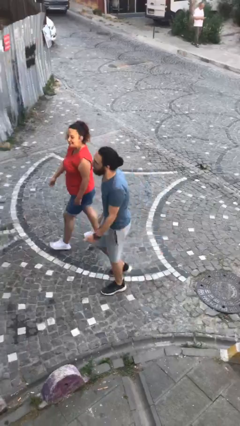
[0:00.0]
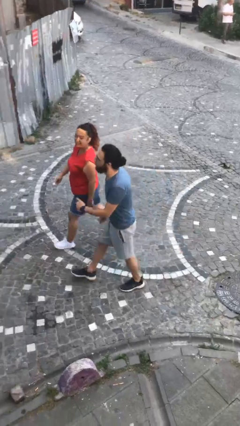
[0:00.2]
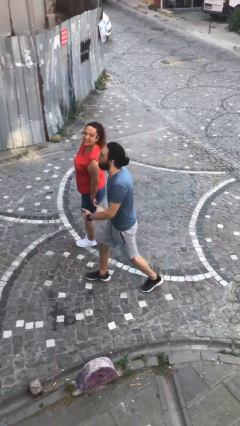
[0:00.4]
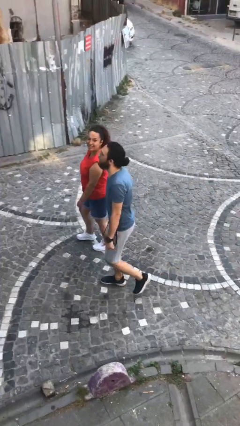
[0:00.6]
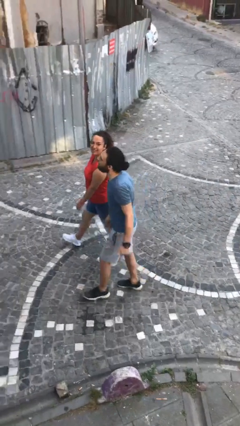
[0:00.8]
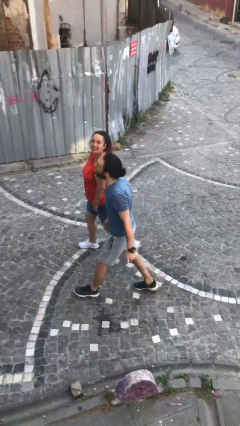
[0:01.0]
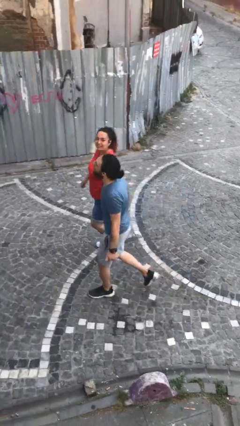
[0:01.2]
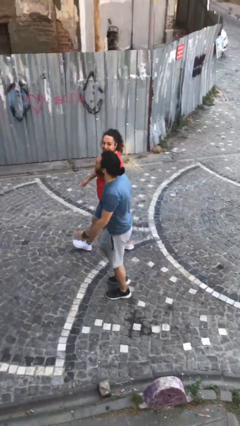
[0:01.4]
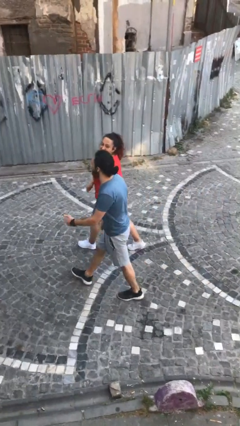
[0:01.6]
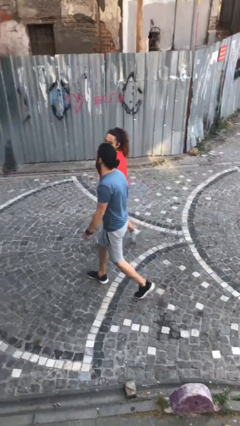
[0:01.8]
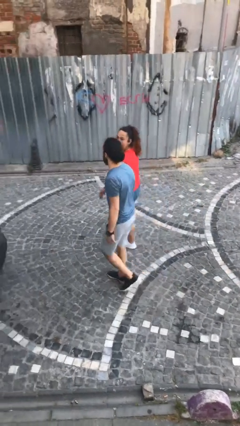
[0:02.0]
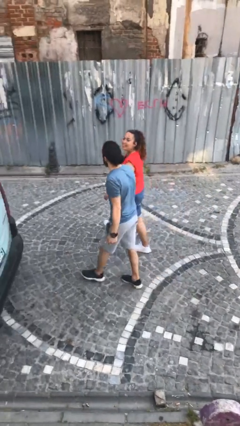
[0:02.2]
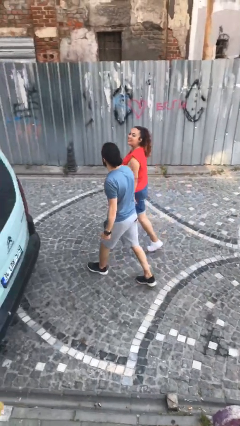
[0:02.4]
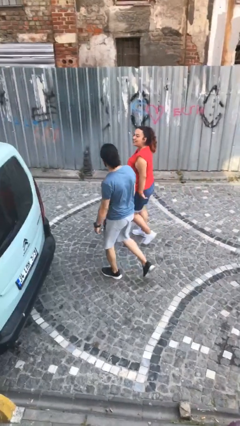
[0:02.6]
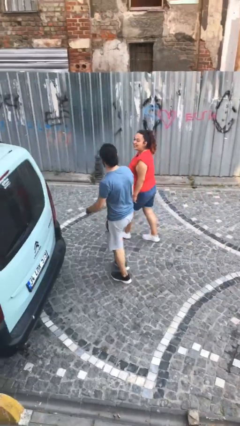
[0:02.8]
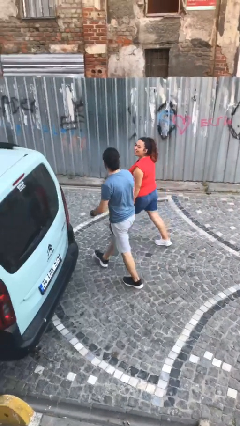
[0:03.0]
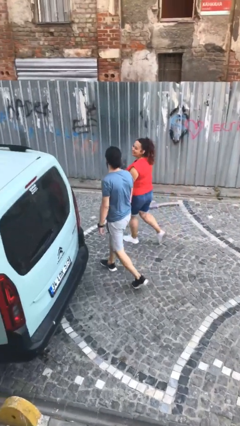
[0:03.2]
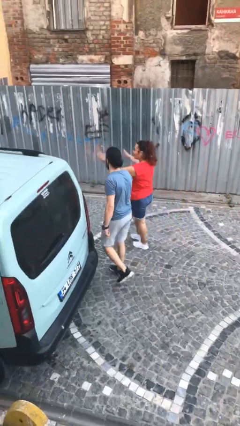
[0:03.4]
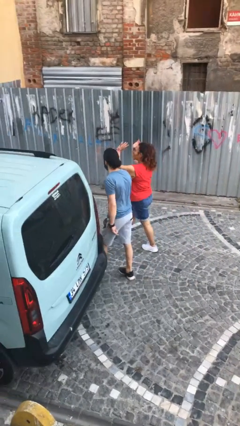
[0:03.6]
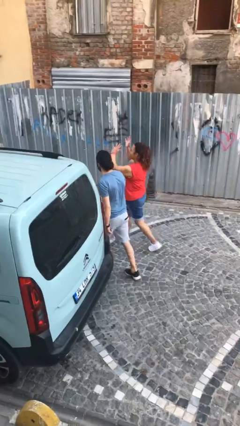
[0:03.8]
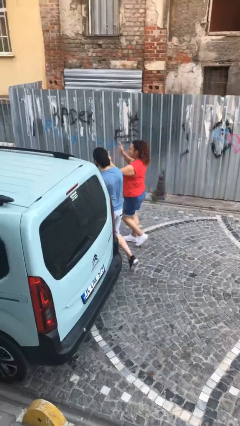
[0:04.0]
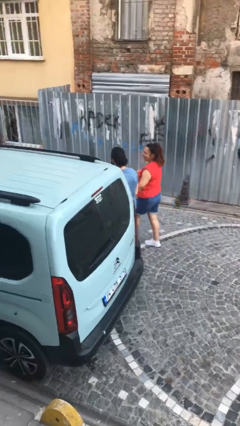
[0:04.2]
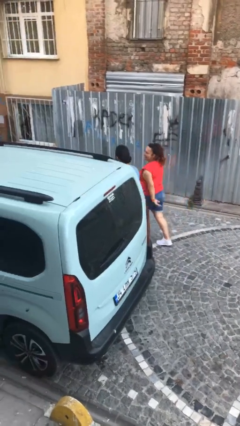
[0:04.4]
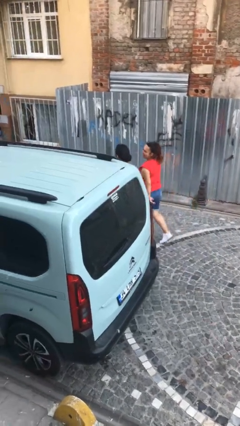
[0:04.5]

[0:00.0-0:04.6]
person talks to person

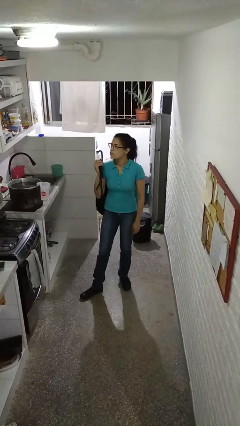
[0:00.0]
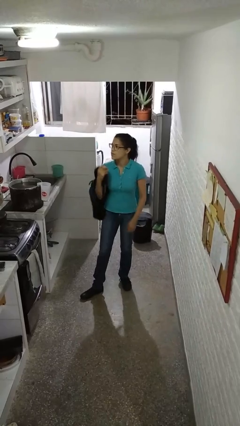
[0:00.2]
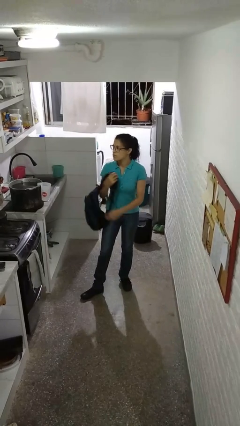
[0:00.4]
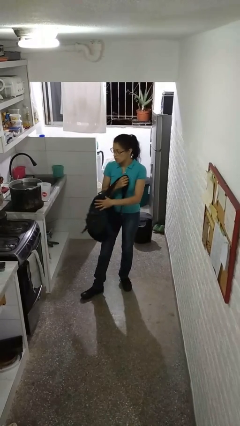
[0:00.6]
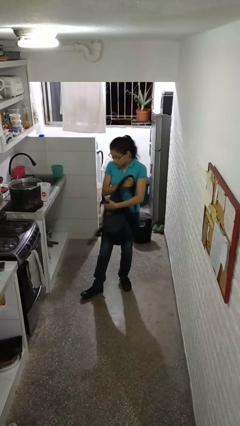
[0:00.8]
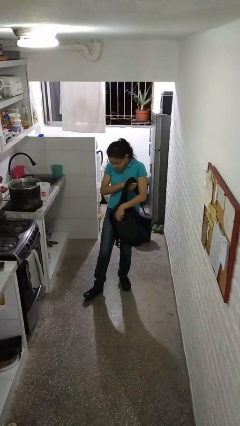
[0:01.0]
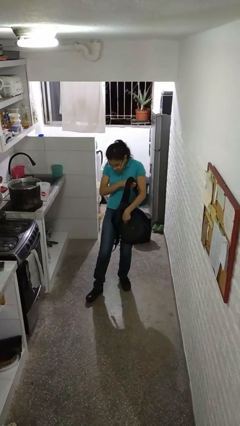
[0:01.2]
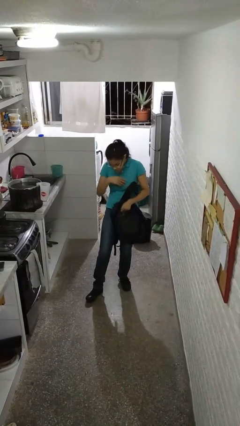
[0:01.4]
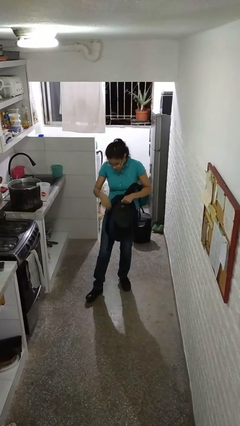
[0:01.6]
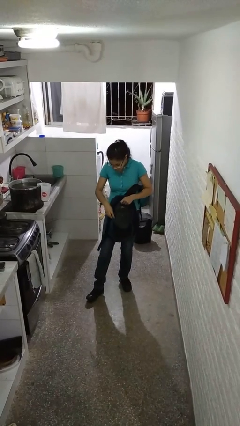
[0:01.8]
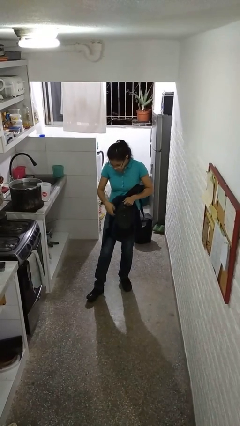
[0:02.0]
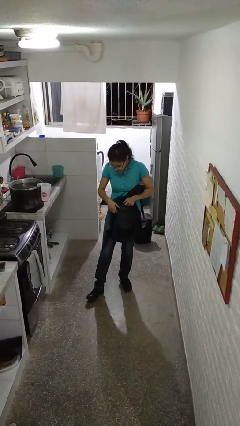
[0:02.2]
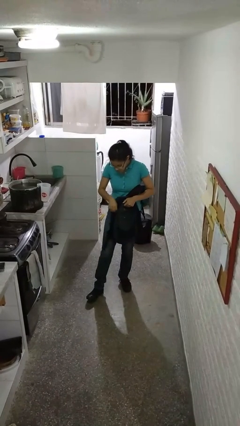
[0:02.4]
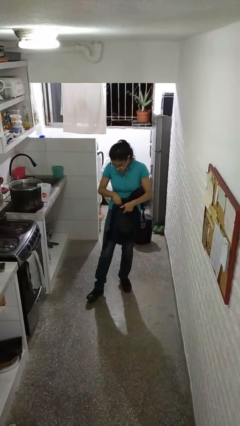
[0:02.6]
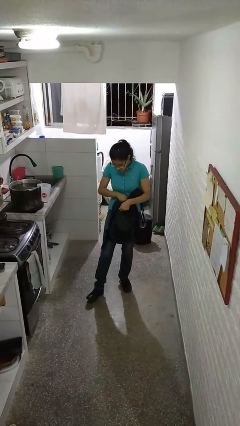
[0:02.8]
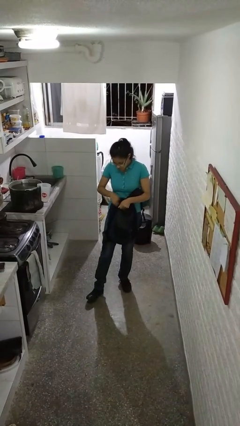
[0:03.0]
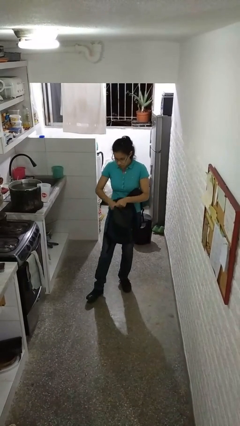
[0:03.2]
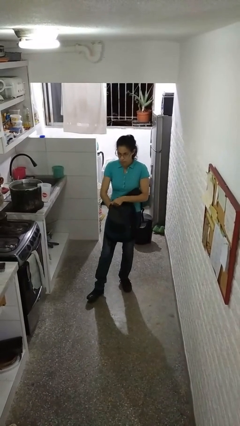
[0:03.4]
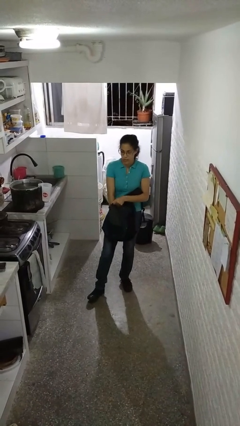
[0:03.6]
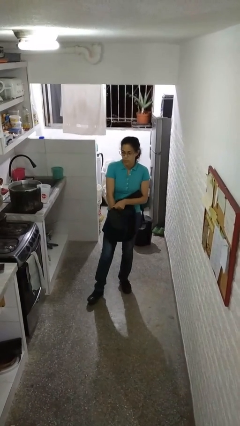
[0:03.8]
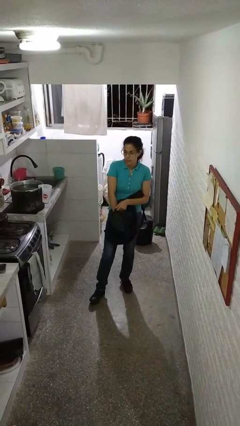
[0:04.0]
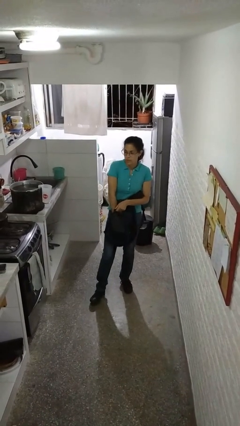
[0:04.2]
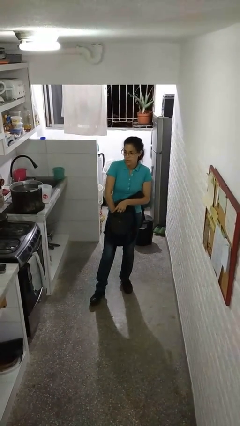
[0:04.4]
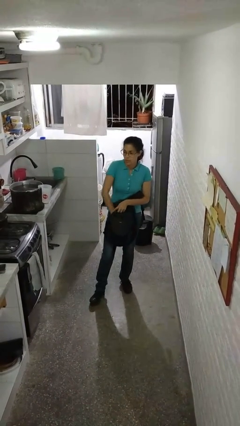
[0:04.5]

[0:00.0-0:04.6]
person searches in backpack

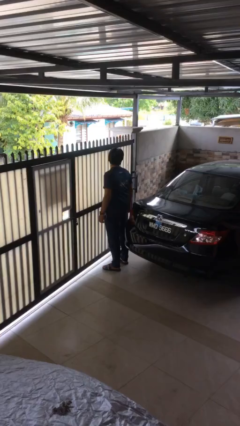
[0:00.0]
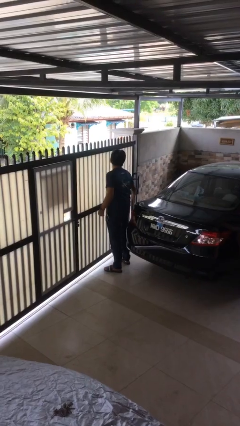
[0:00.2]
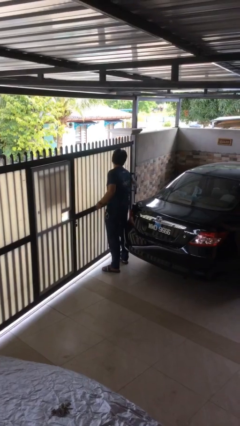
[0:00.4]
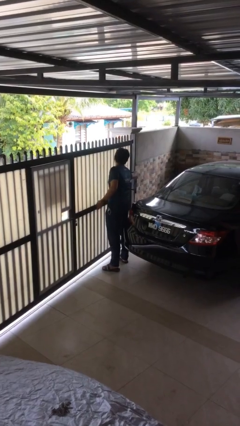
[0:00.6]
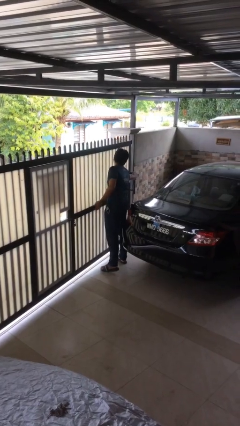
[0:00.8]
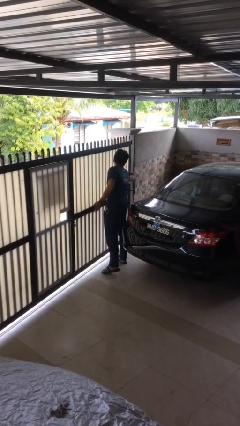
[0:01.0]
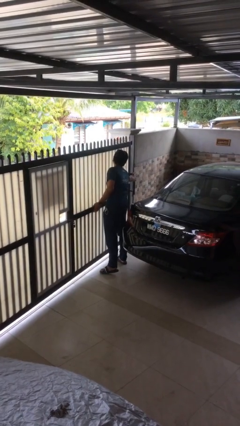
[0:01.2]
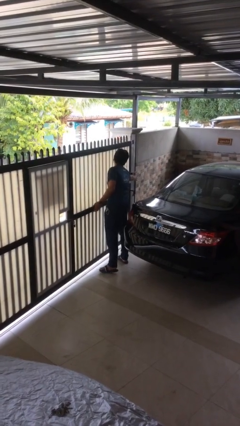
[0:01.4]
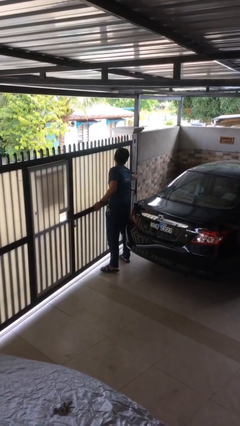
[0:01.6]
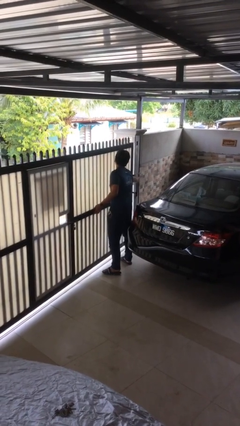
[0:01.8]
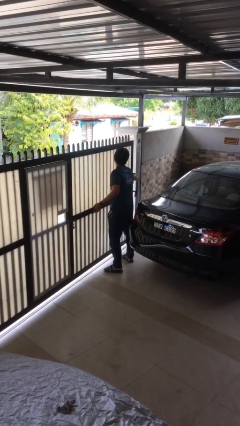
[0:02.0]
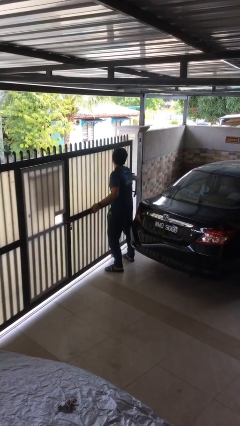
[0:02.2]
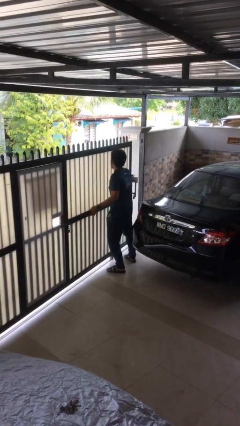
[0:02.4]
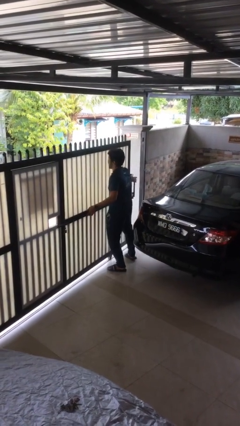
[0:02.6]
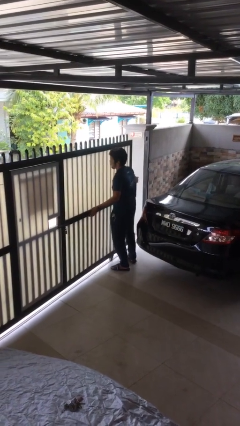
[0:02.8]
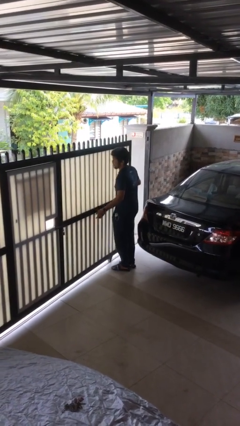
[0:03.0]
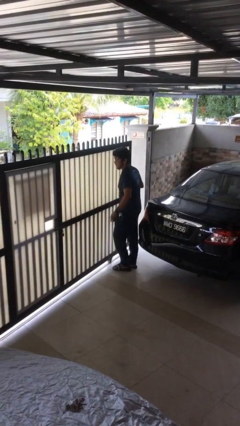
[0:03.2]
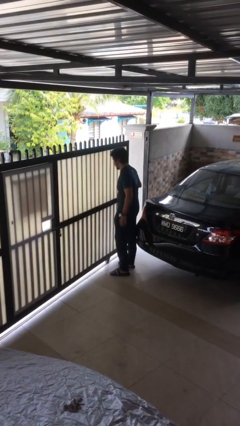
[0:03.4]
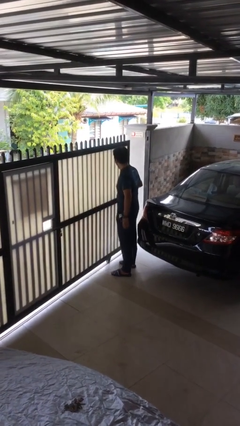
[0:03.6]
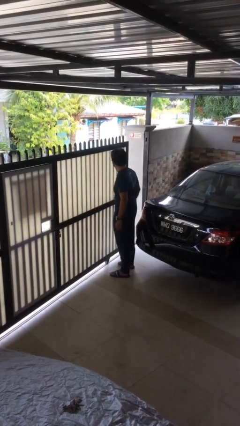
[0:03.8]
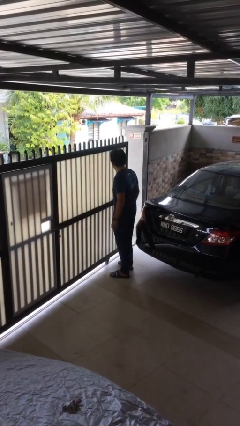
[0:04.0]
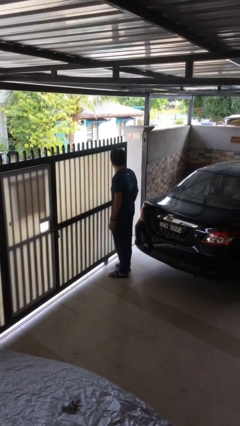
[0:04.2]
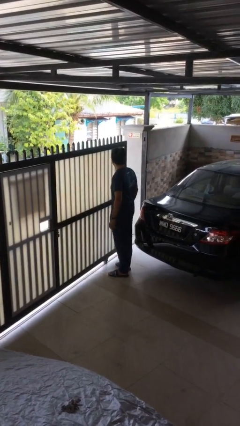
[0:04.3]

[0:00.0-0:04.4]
person opens sliding door

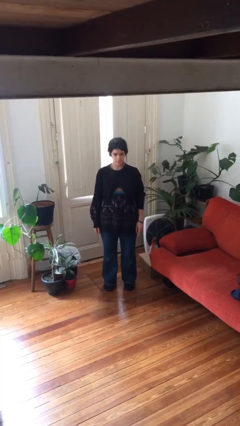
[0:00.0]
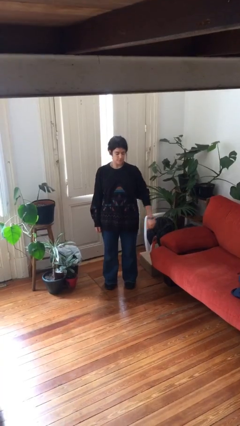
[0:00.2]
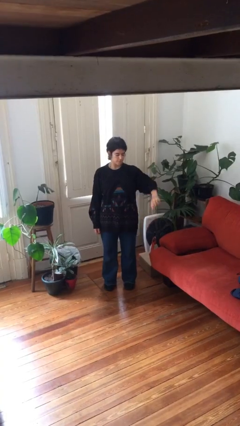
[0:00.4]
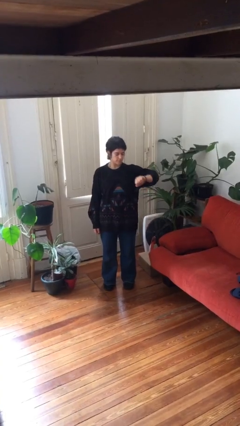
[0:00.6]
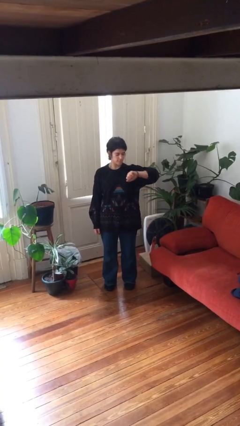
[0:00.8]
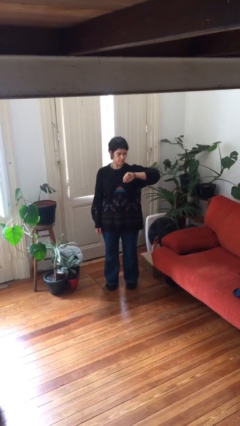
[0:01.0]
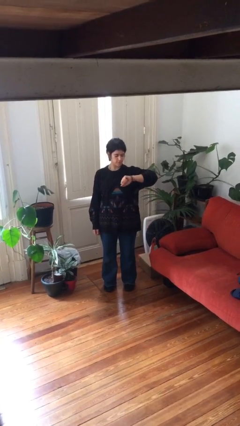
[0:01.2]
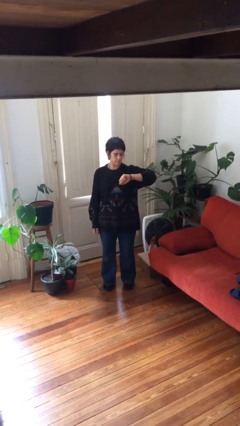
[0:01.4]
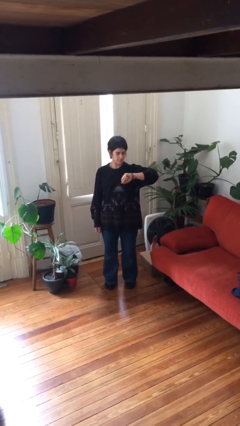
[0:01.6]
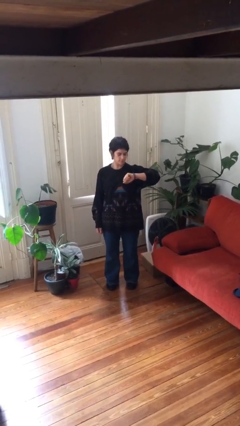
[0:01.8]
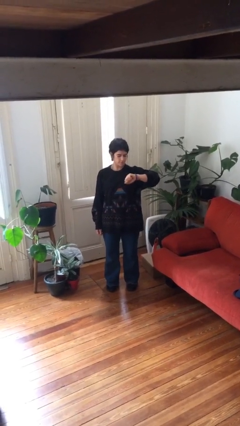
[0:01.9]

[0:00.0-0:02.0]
person looks at wristwatch

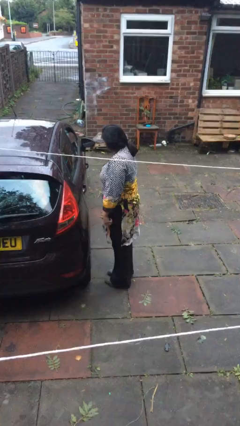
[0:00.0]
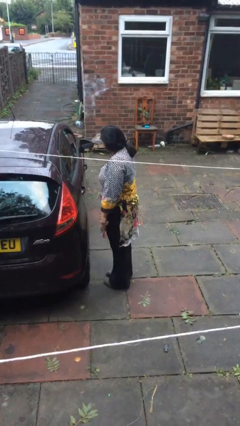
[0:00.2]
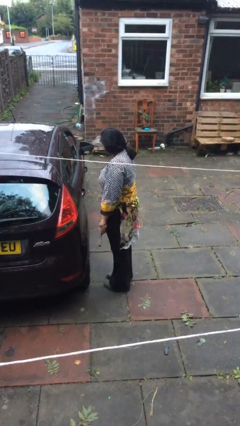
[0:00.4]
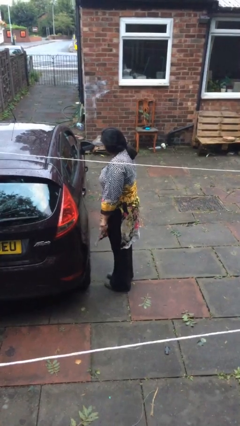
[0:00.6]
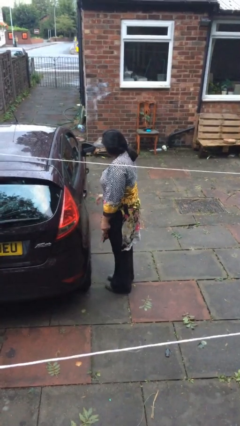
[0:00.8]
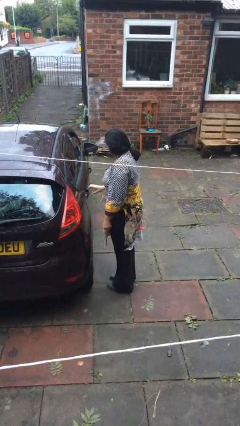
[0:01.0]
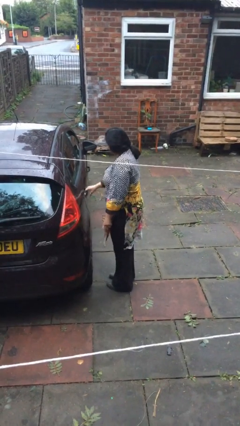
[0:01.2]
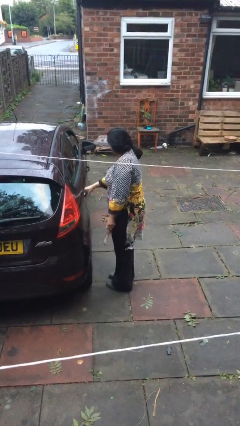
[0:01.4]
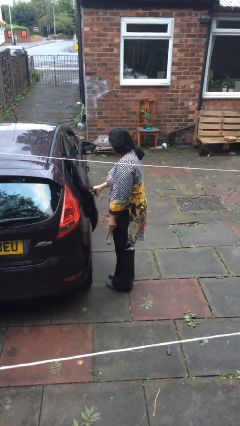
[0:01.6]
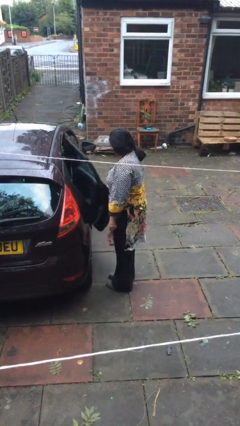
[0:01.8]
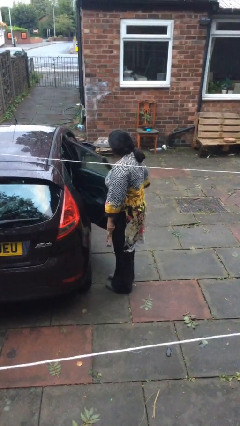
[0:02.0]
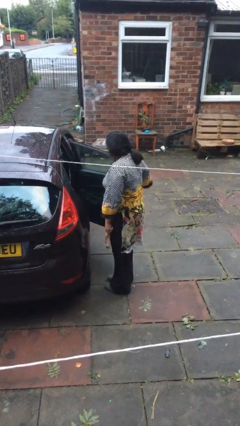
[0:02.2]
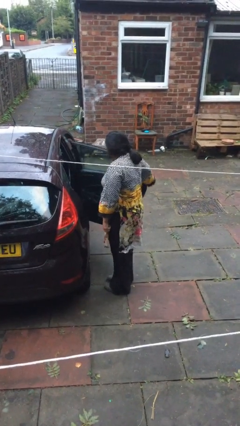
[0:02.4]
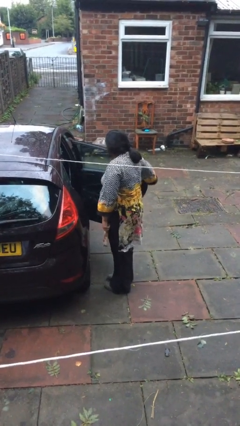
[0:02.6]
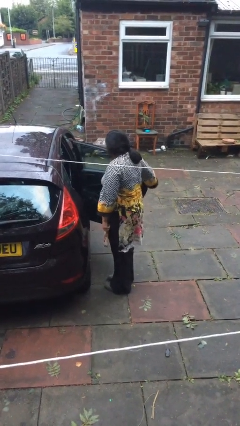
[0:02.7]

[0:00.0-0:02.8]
person opens car door
